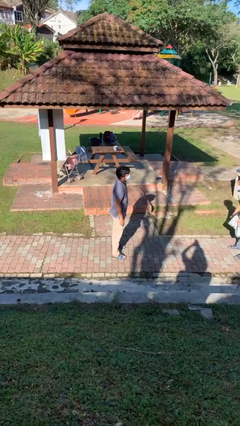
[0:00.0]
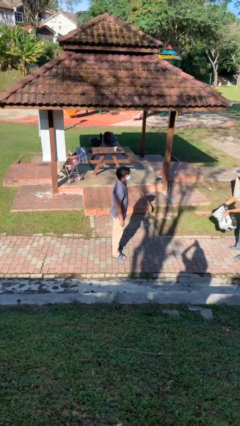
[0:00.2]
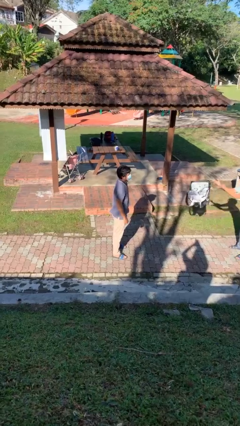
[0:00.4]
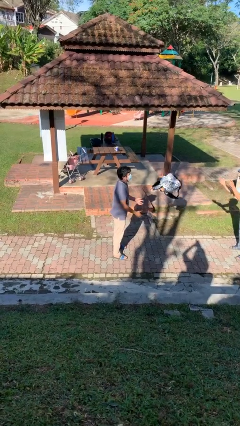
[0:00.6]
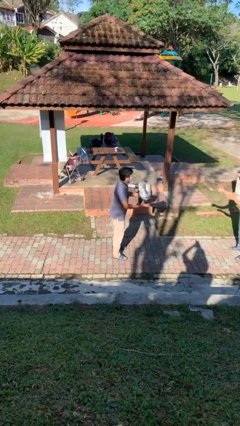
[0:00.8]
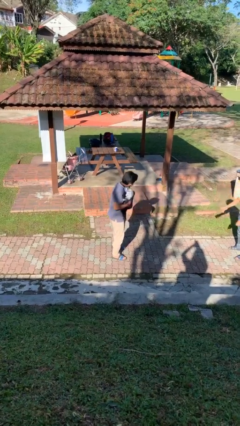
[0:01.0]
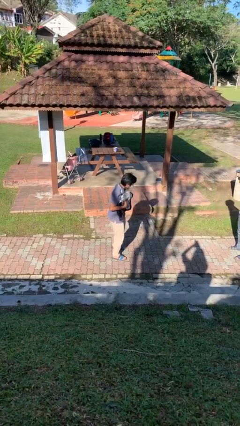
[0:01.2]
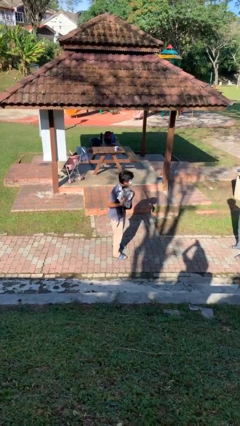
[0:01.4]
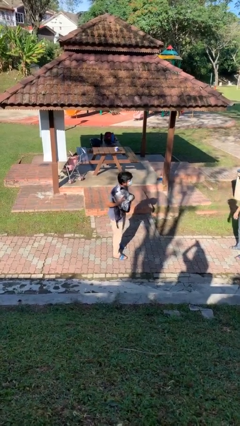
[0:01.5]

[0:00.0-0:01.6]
person catches object from person

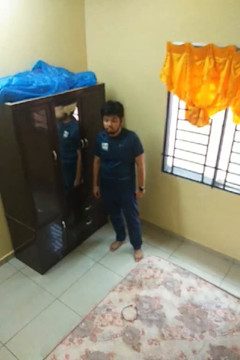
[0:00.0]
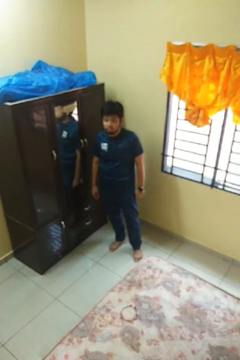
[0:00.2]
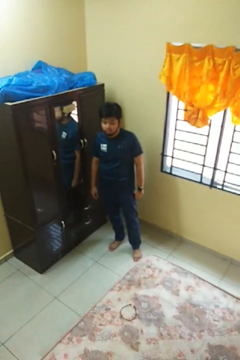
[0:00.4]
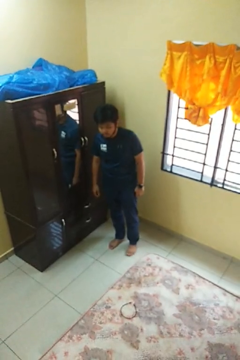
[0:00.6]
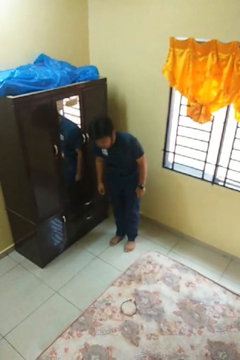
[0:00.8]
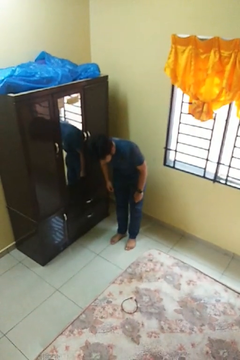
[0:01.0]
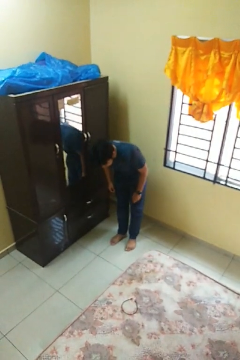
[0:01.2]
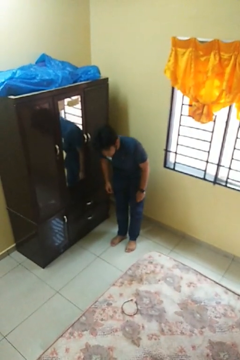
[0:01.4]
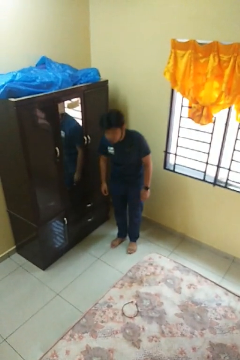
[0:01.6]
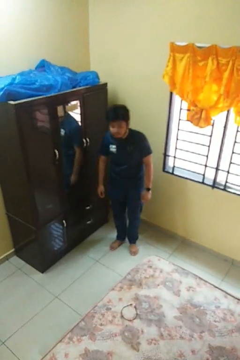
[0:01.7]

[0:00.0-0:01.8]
person bows

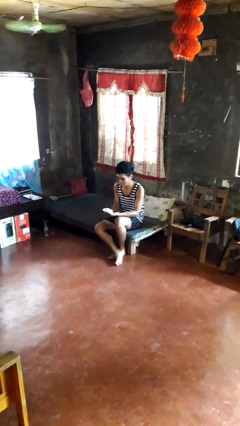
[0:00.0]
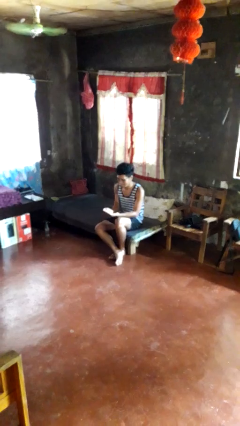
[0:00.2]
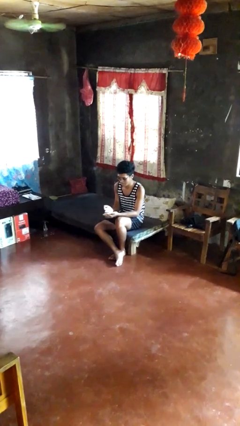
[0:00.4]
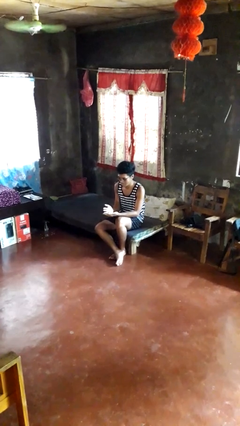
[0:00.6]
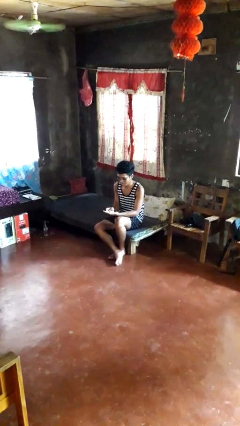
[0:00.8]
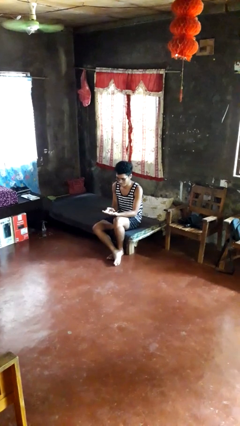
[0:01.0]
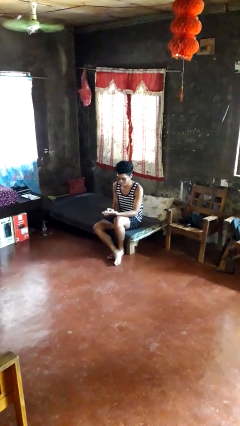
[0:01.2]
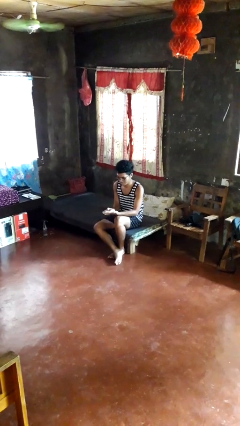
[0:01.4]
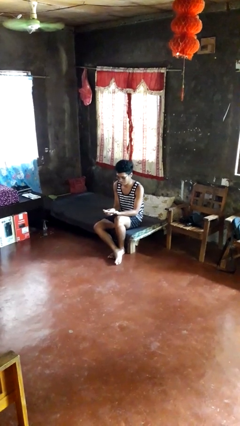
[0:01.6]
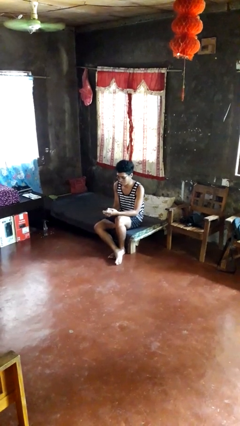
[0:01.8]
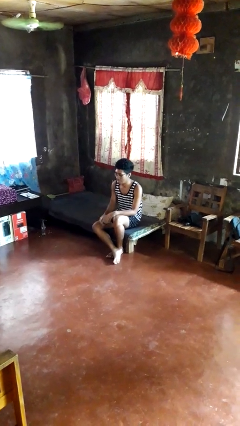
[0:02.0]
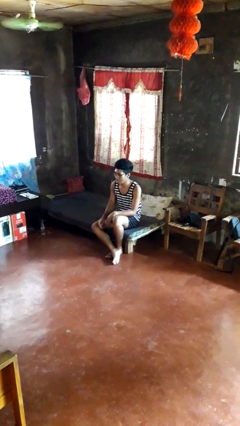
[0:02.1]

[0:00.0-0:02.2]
person looks at hands in lap

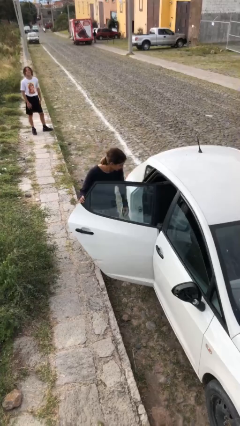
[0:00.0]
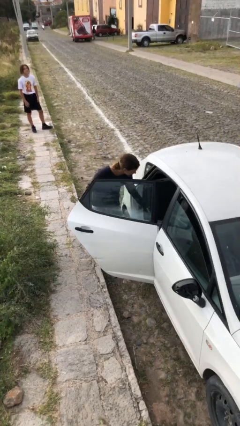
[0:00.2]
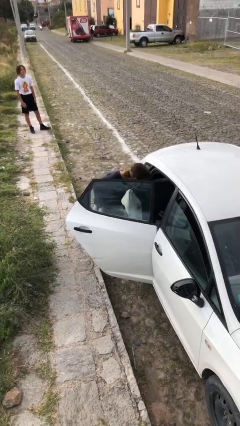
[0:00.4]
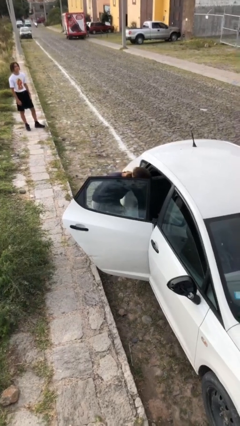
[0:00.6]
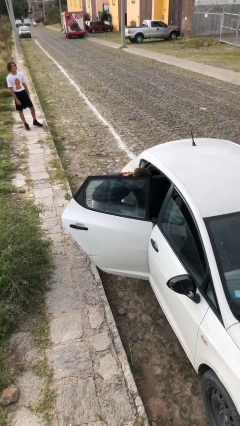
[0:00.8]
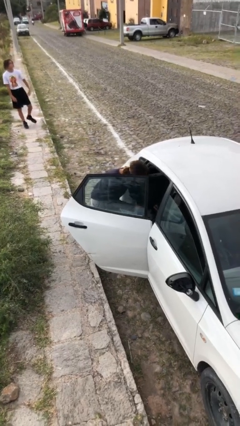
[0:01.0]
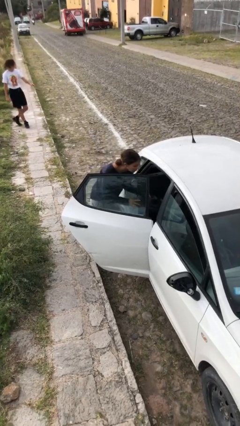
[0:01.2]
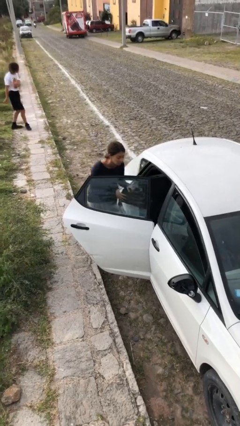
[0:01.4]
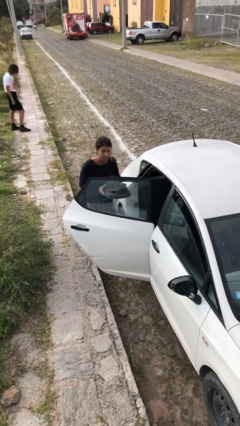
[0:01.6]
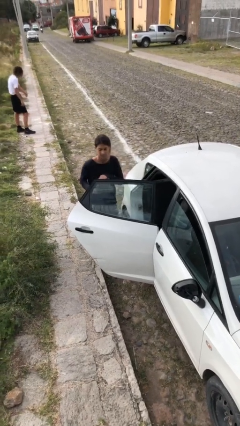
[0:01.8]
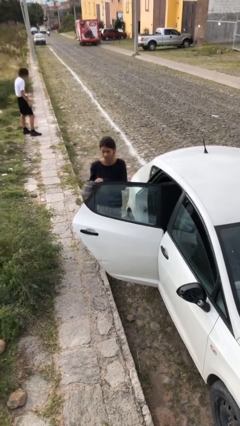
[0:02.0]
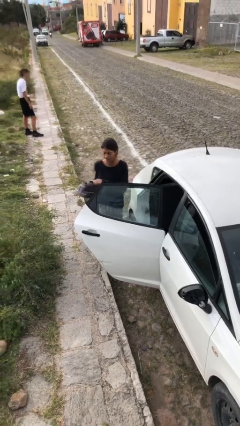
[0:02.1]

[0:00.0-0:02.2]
person unloads car

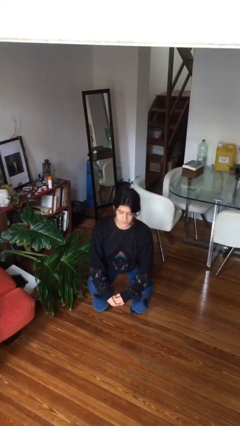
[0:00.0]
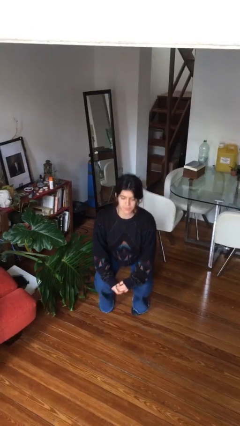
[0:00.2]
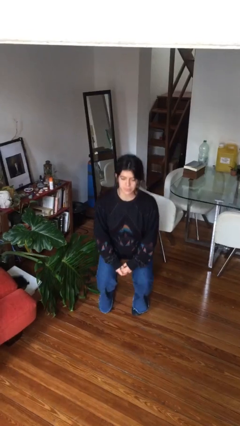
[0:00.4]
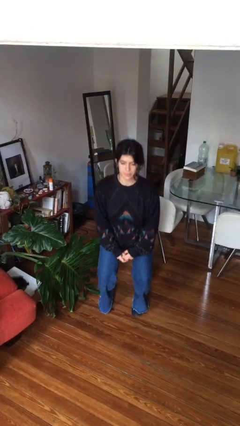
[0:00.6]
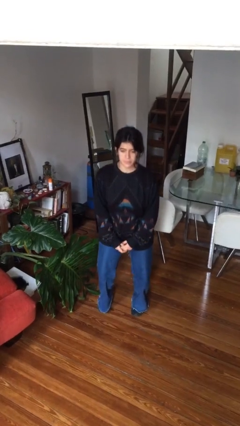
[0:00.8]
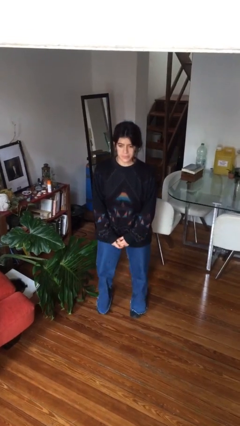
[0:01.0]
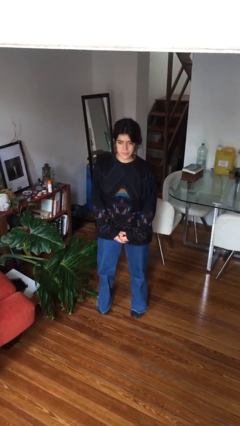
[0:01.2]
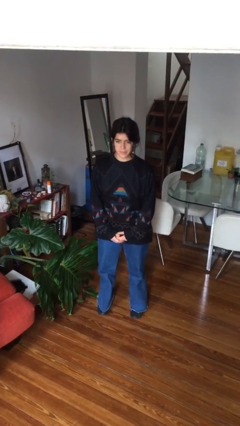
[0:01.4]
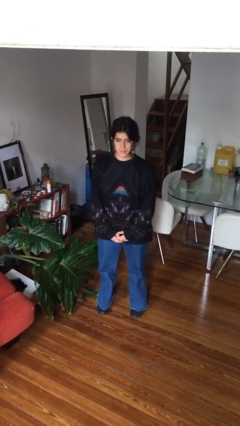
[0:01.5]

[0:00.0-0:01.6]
person stands up

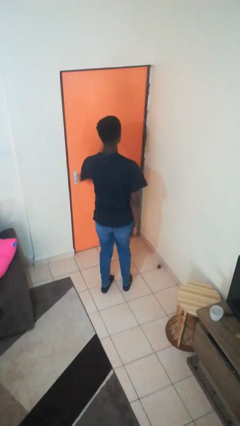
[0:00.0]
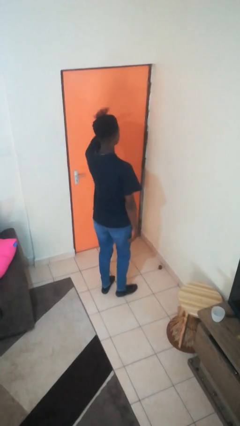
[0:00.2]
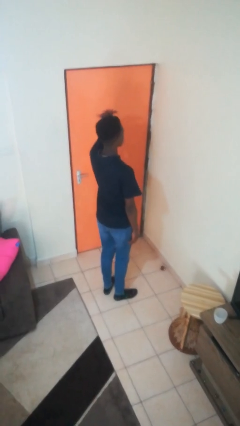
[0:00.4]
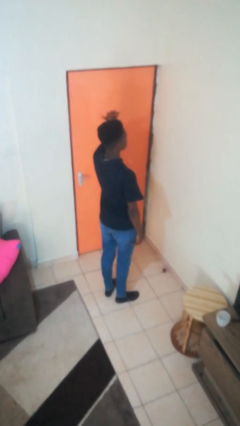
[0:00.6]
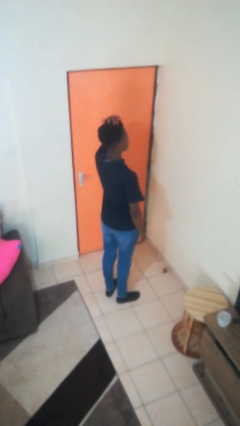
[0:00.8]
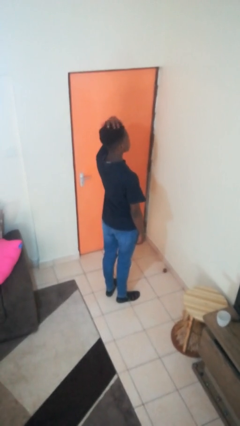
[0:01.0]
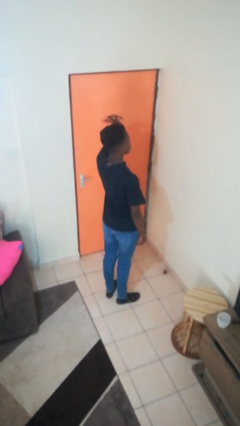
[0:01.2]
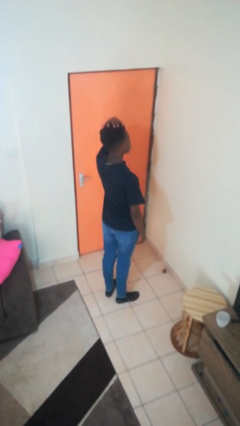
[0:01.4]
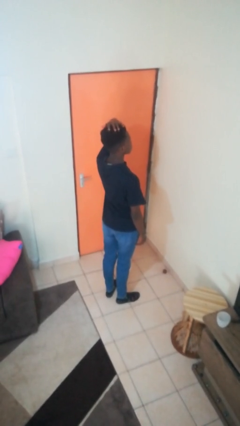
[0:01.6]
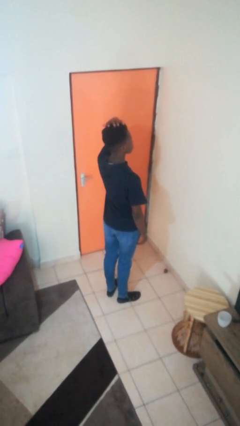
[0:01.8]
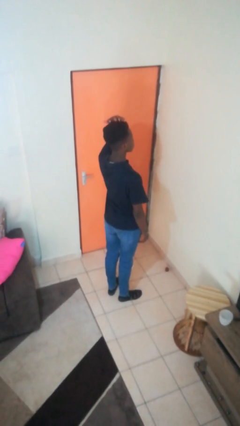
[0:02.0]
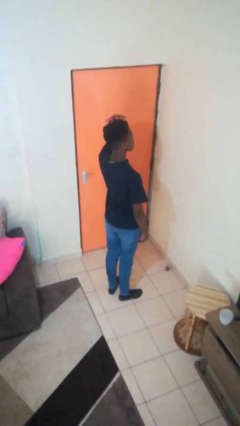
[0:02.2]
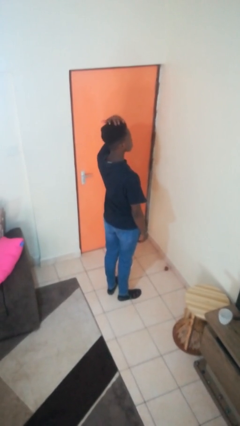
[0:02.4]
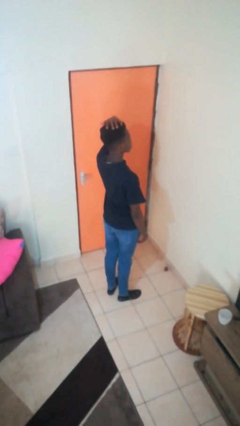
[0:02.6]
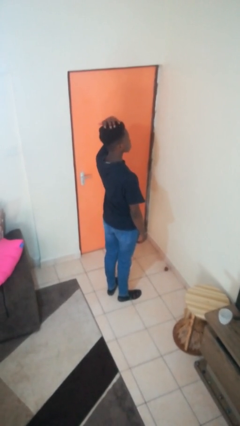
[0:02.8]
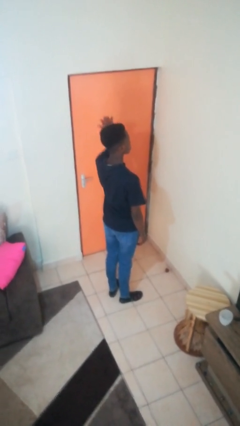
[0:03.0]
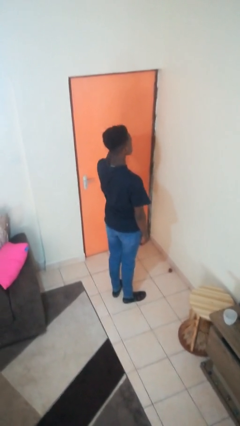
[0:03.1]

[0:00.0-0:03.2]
person pats head

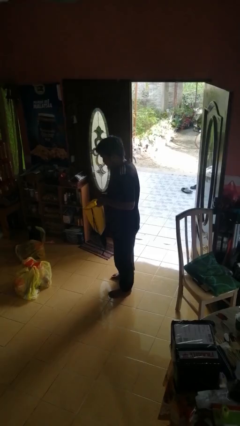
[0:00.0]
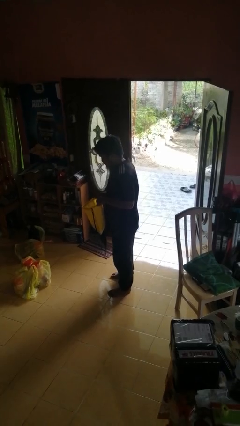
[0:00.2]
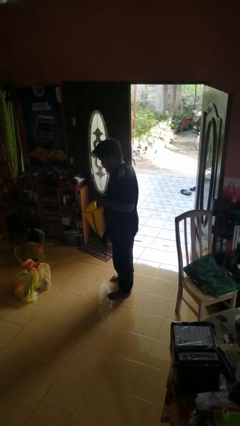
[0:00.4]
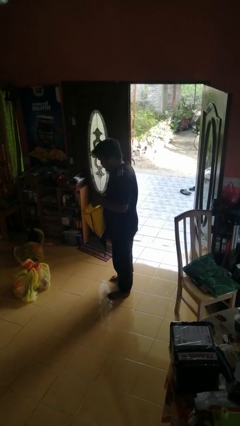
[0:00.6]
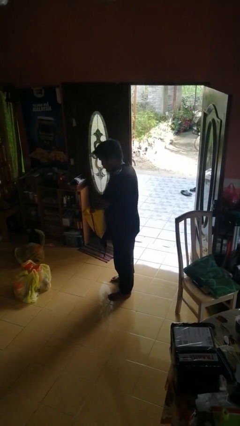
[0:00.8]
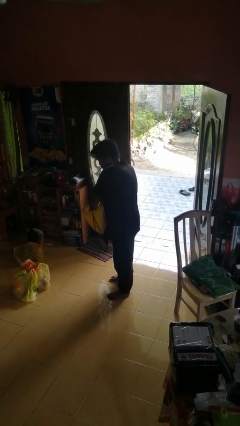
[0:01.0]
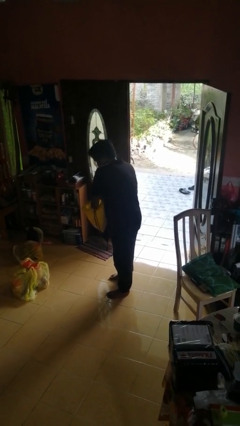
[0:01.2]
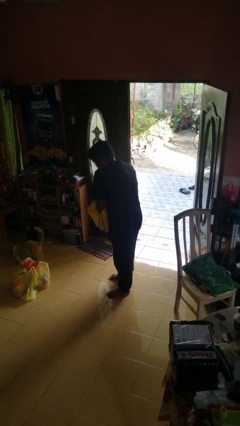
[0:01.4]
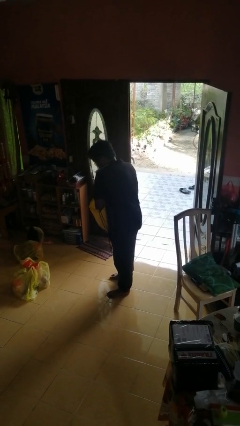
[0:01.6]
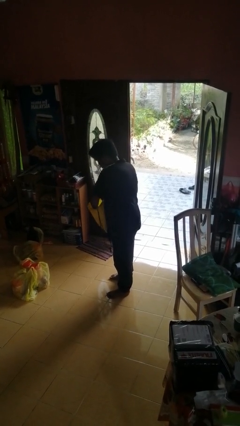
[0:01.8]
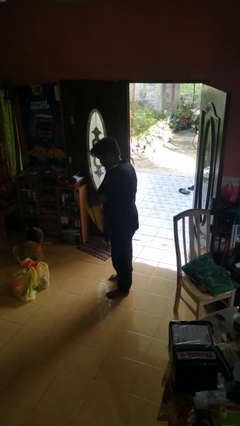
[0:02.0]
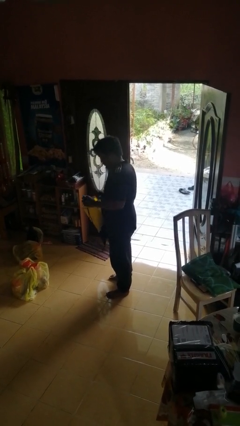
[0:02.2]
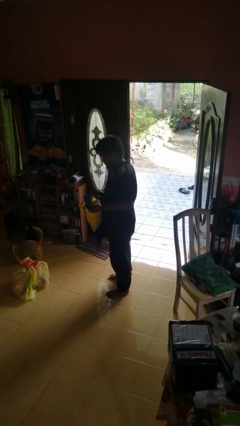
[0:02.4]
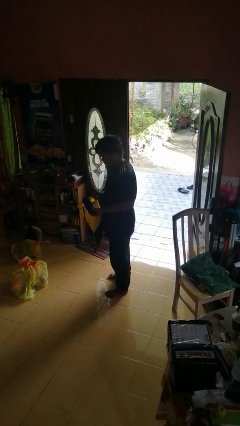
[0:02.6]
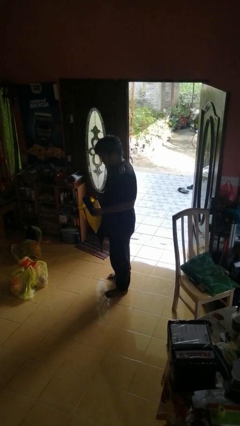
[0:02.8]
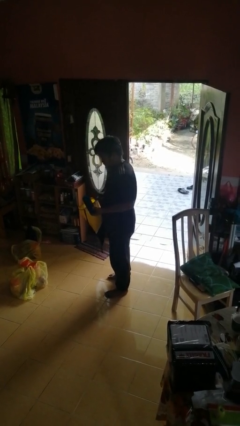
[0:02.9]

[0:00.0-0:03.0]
person takes object from bag

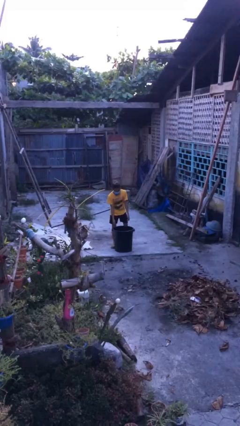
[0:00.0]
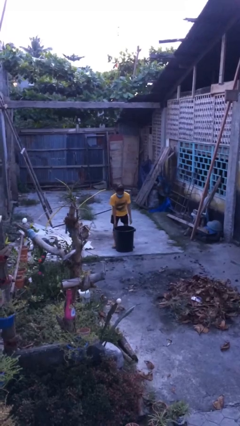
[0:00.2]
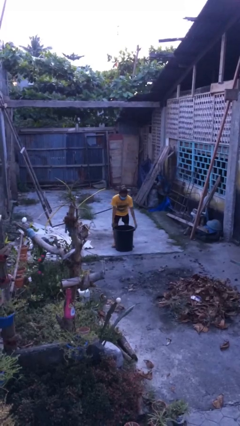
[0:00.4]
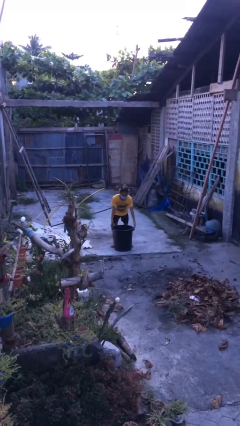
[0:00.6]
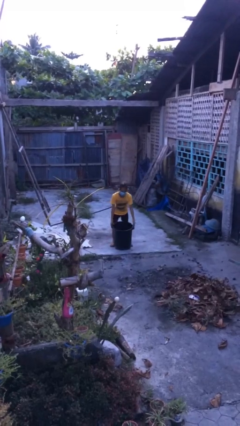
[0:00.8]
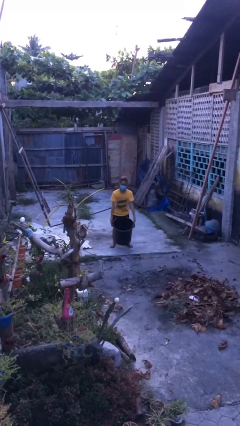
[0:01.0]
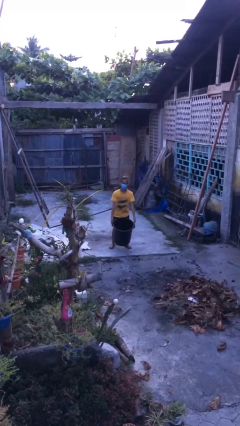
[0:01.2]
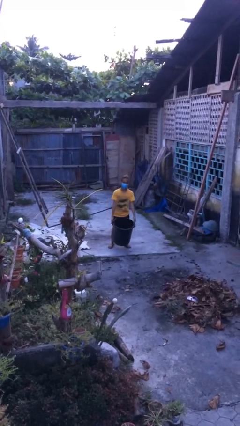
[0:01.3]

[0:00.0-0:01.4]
person picks up object from floor

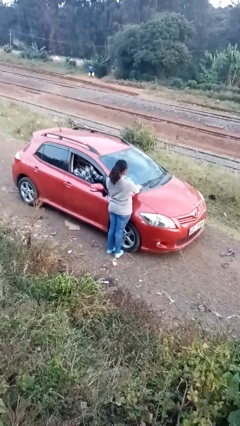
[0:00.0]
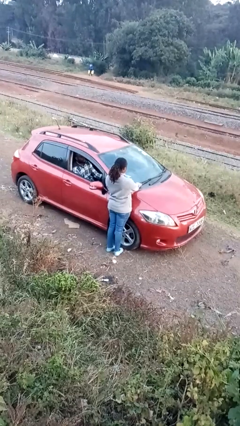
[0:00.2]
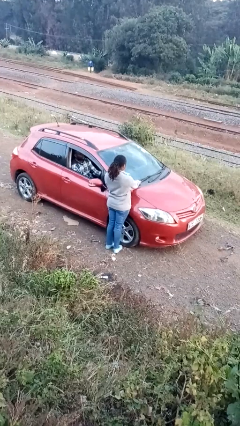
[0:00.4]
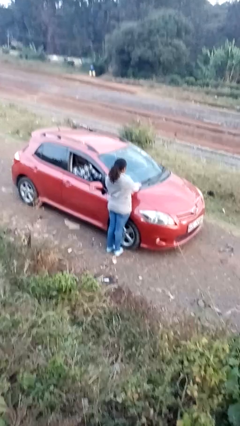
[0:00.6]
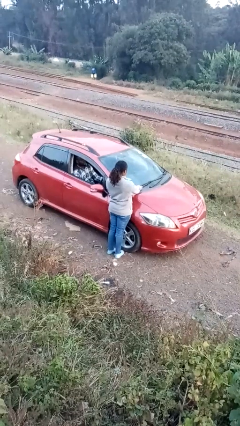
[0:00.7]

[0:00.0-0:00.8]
person flips down car wipers
